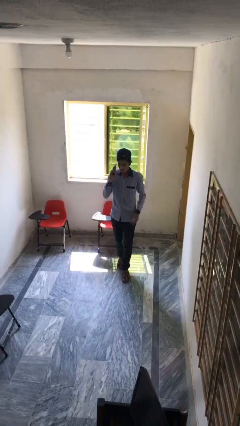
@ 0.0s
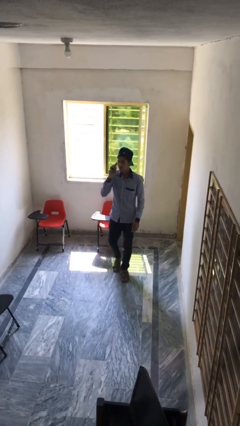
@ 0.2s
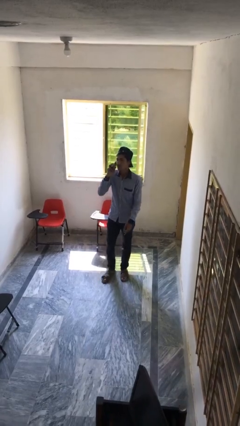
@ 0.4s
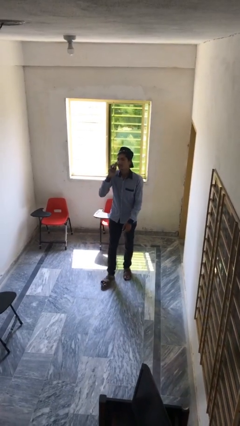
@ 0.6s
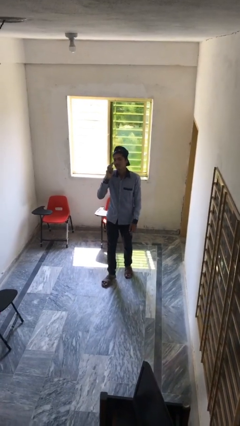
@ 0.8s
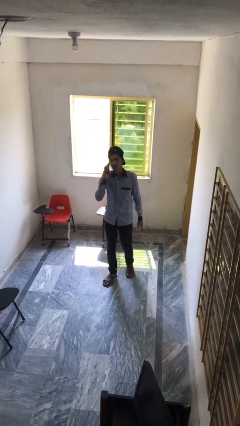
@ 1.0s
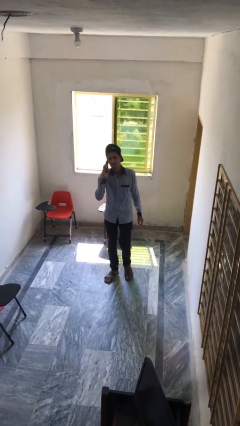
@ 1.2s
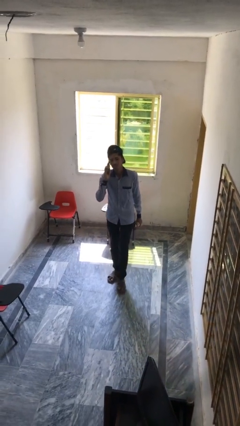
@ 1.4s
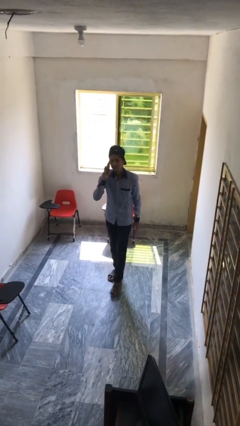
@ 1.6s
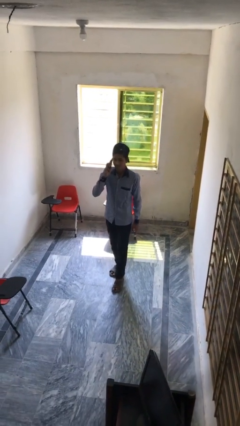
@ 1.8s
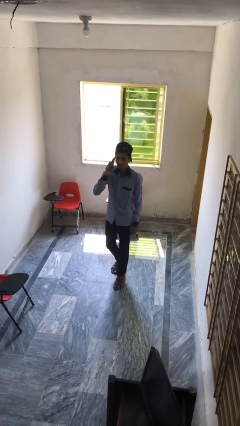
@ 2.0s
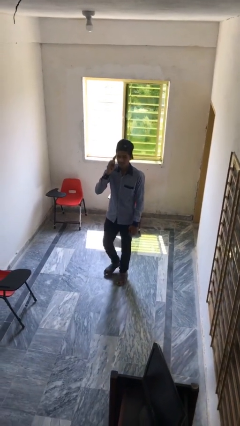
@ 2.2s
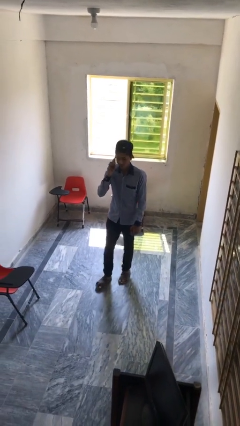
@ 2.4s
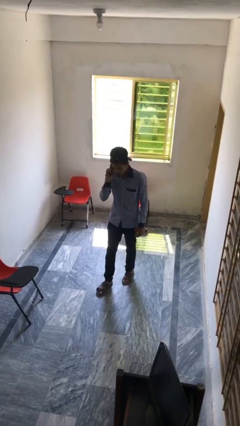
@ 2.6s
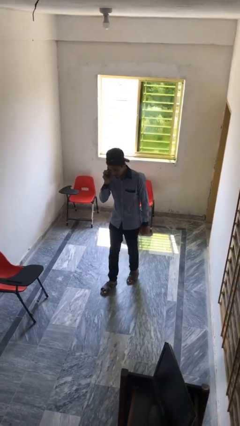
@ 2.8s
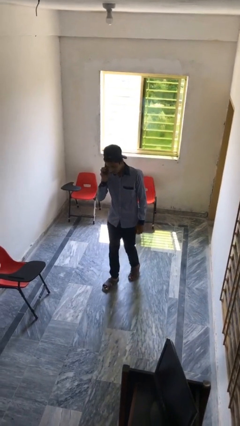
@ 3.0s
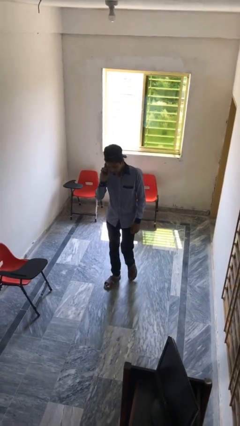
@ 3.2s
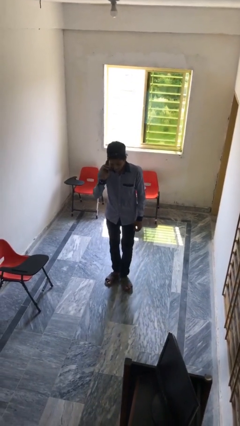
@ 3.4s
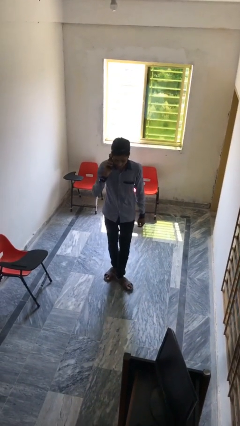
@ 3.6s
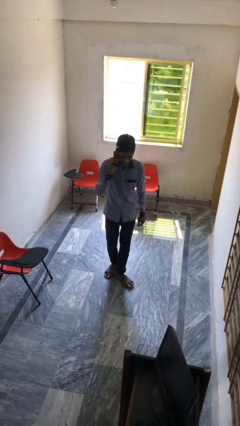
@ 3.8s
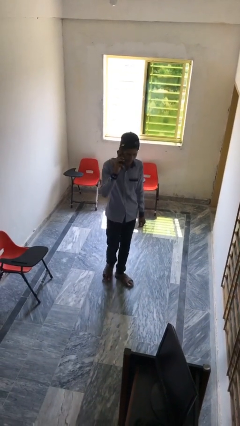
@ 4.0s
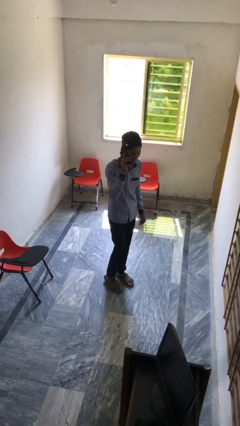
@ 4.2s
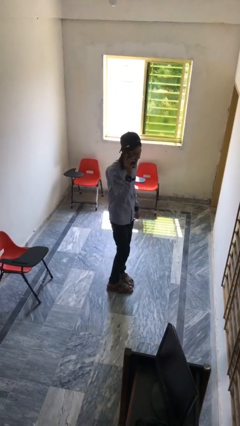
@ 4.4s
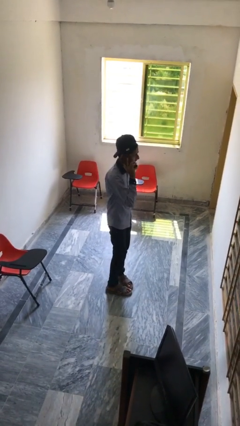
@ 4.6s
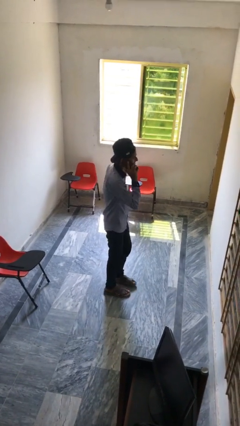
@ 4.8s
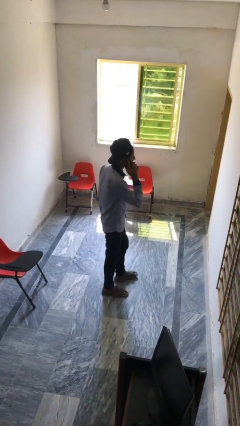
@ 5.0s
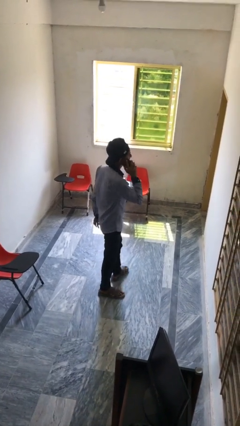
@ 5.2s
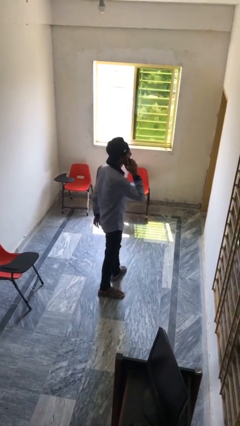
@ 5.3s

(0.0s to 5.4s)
person talks on phone

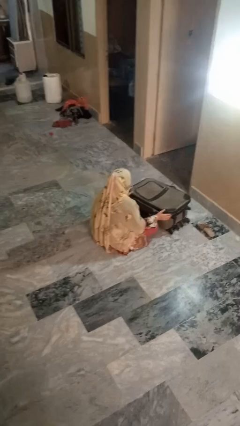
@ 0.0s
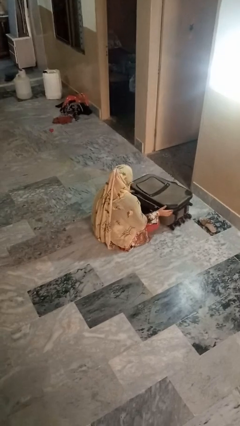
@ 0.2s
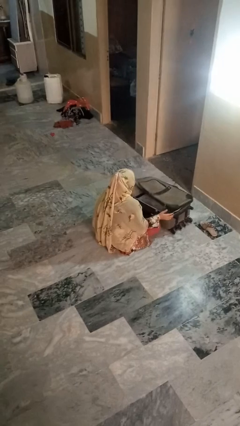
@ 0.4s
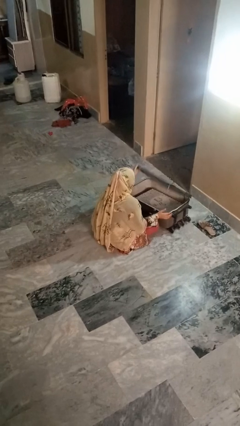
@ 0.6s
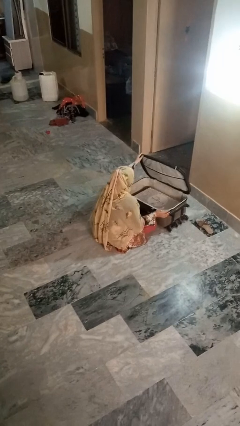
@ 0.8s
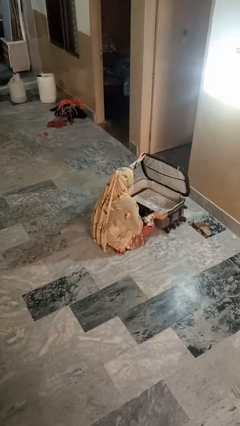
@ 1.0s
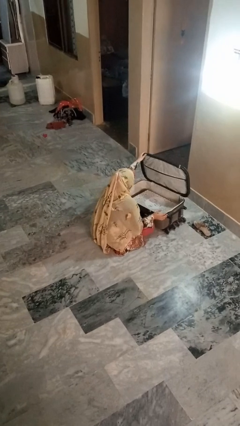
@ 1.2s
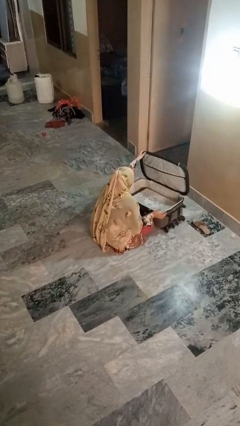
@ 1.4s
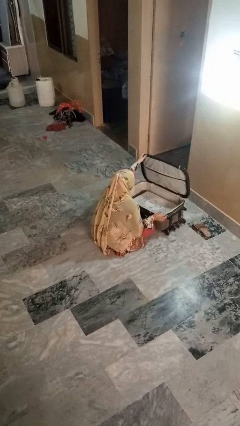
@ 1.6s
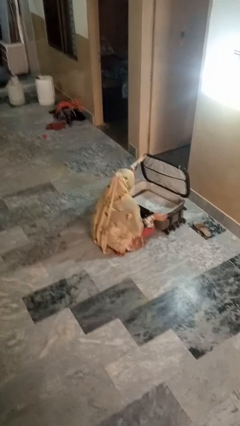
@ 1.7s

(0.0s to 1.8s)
person opens suitcase

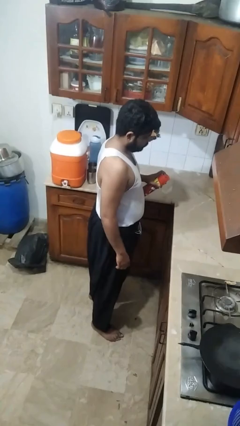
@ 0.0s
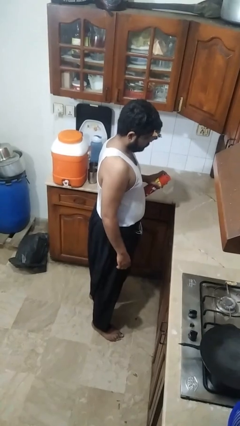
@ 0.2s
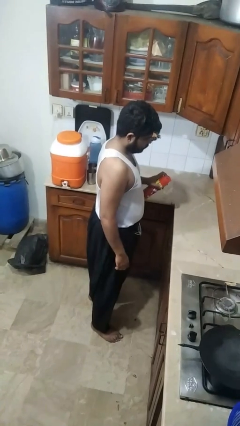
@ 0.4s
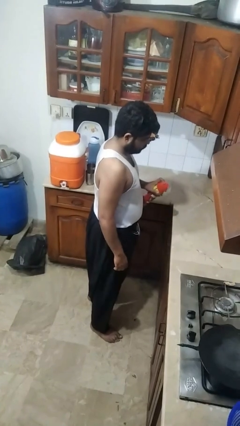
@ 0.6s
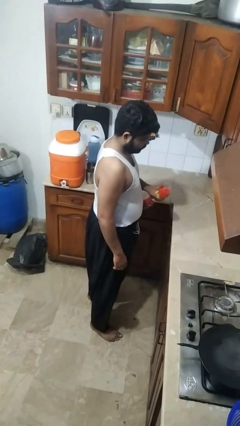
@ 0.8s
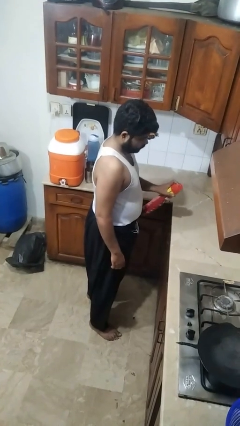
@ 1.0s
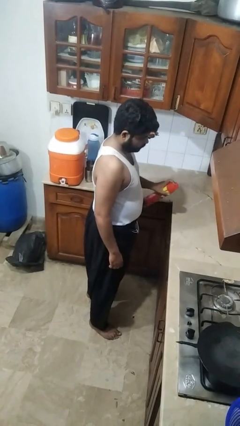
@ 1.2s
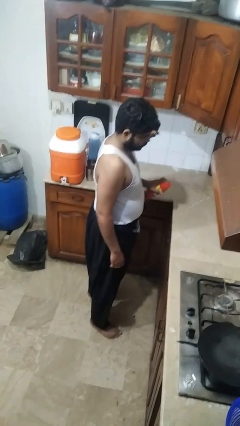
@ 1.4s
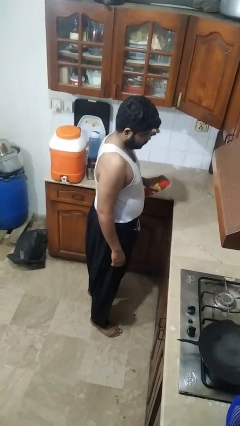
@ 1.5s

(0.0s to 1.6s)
person sprays from bottle

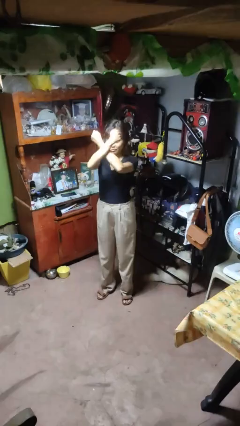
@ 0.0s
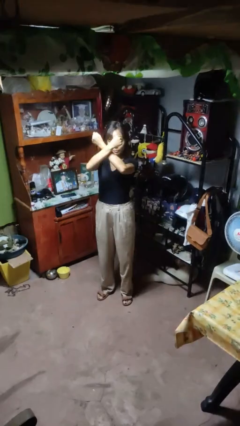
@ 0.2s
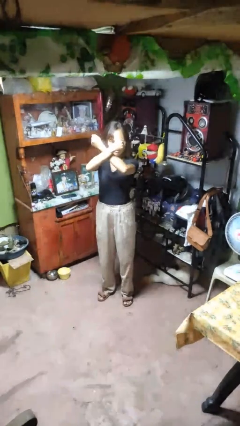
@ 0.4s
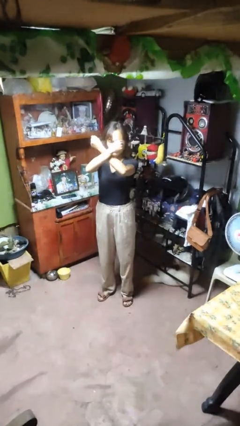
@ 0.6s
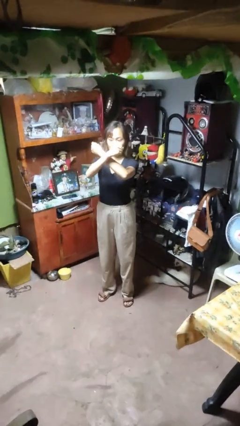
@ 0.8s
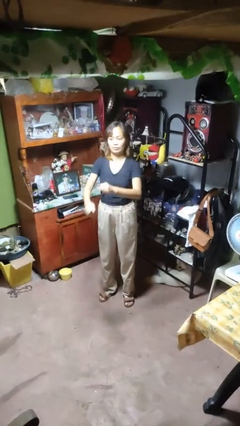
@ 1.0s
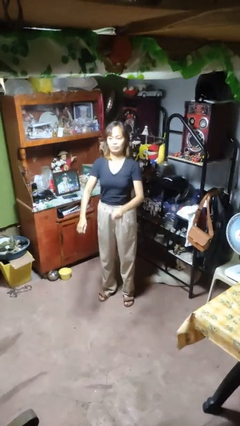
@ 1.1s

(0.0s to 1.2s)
person gestures arms x

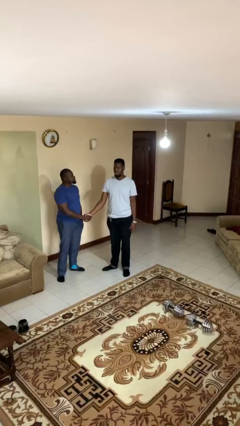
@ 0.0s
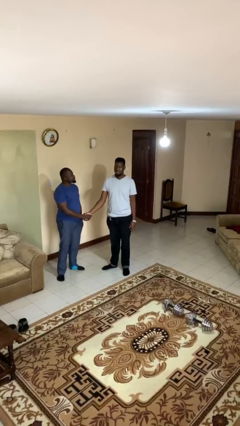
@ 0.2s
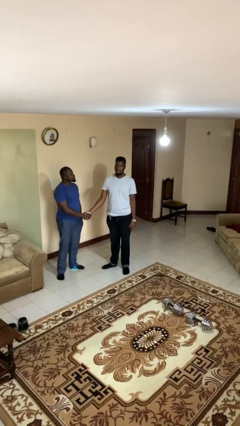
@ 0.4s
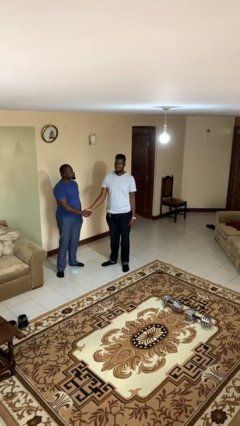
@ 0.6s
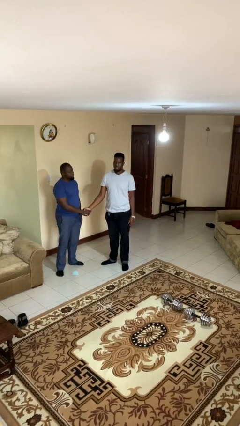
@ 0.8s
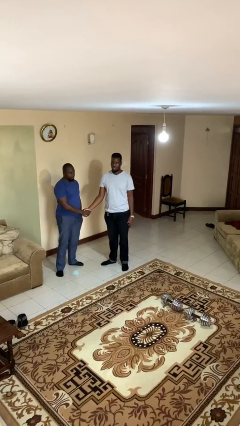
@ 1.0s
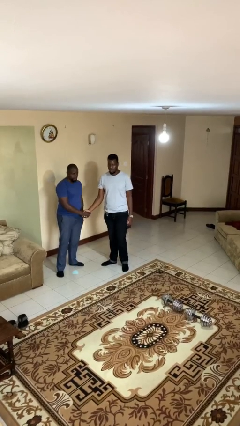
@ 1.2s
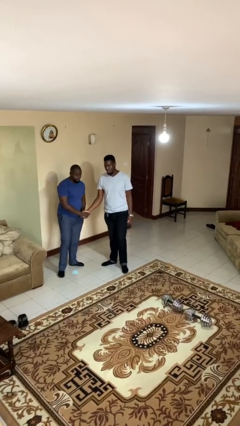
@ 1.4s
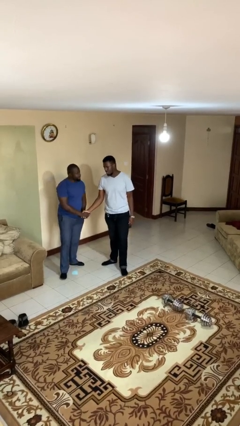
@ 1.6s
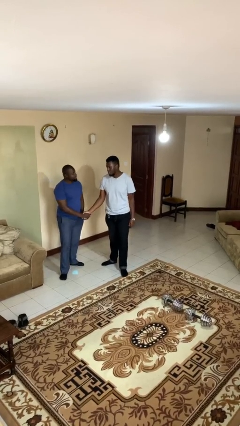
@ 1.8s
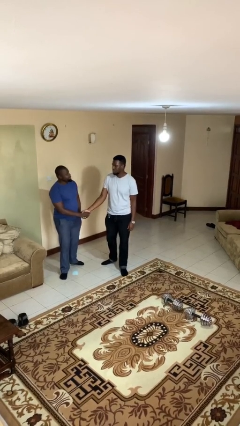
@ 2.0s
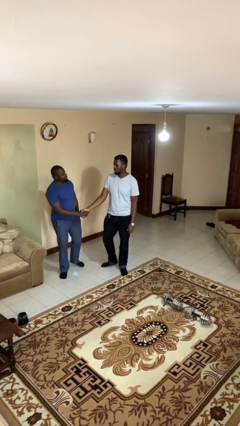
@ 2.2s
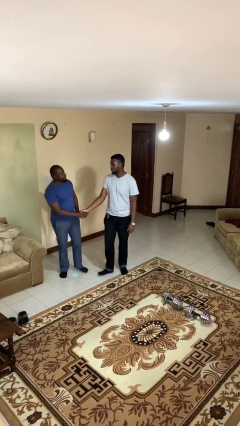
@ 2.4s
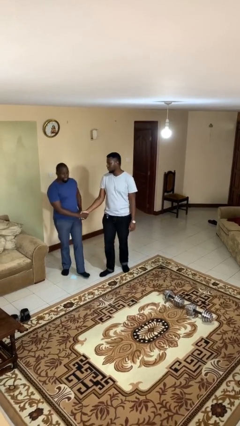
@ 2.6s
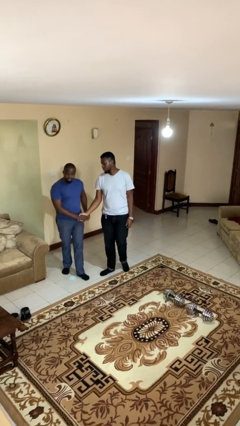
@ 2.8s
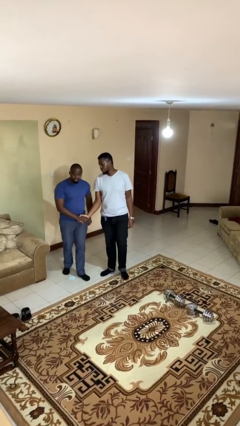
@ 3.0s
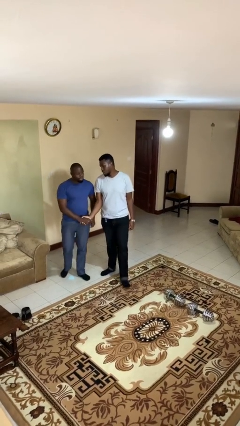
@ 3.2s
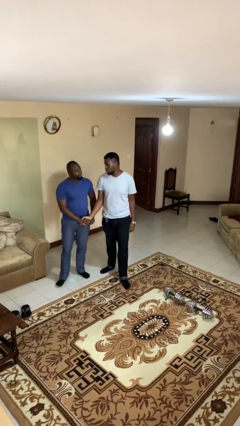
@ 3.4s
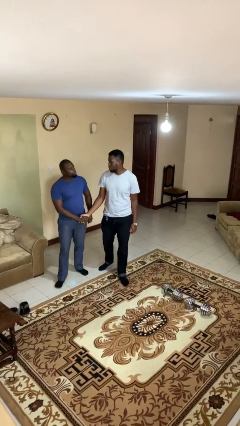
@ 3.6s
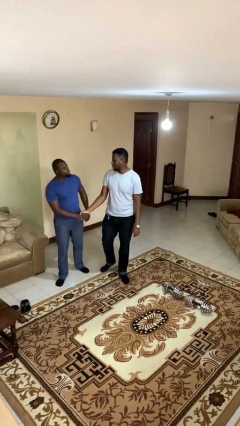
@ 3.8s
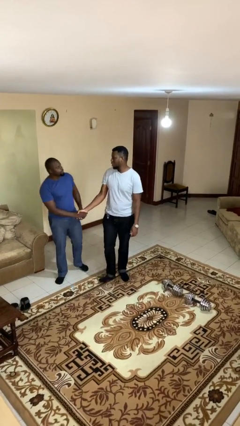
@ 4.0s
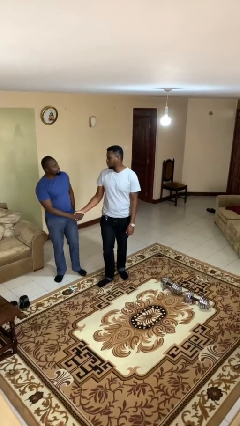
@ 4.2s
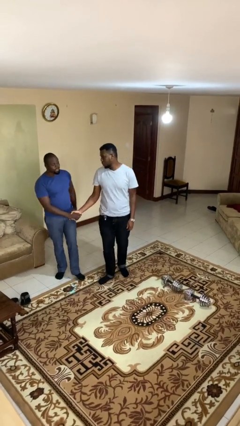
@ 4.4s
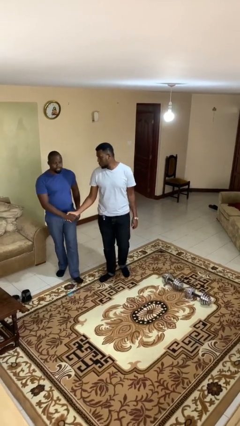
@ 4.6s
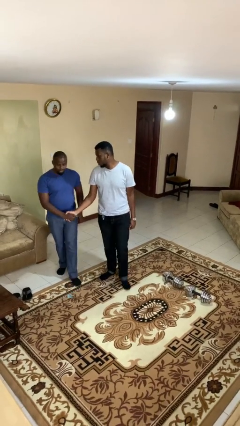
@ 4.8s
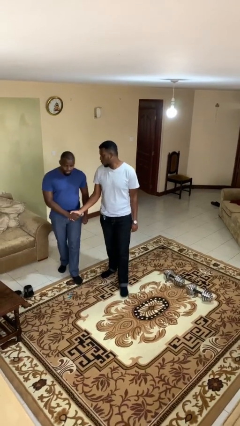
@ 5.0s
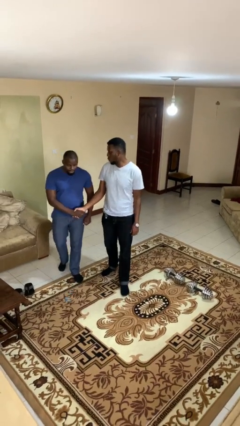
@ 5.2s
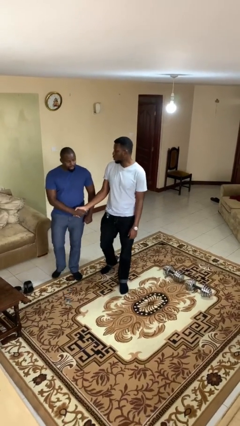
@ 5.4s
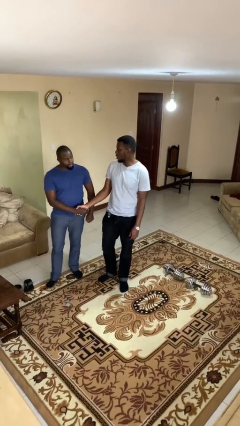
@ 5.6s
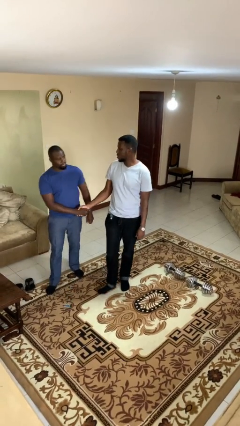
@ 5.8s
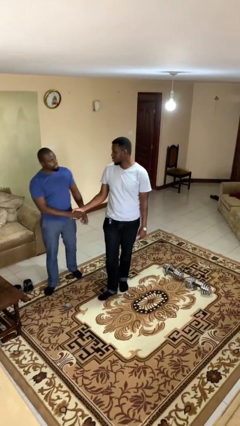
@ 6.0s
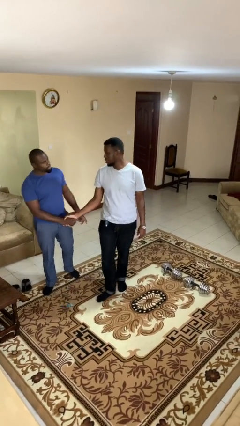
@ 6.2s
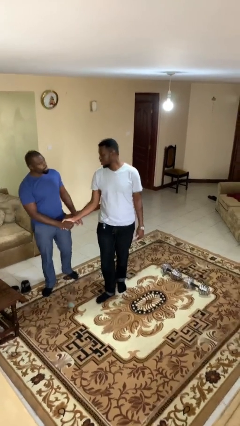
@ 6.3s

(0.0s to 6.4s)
person holds hand

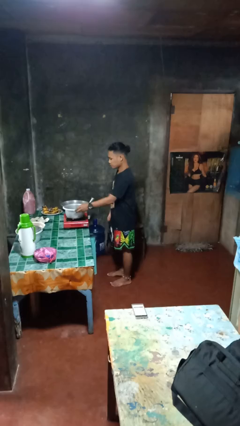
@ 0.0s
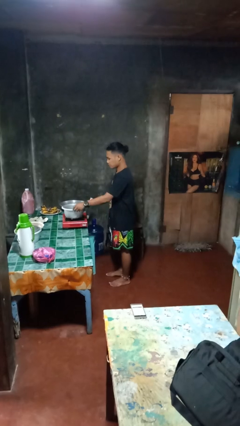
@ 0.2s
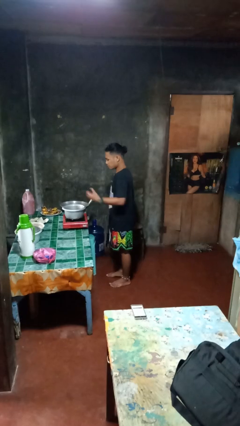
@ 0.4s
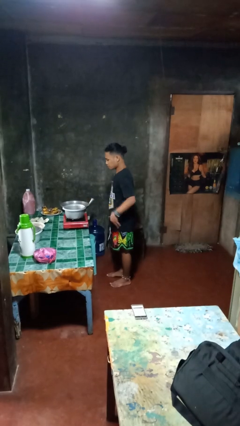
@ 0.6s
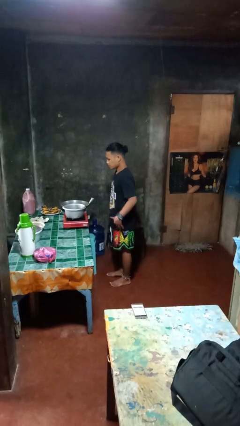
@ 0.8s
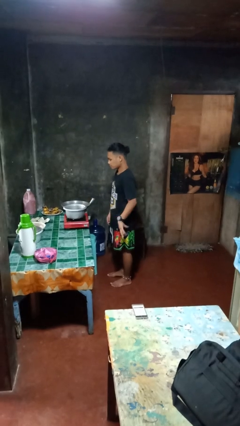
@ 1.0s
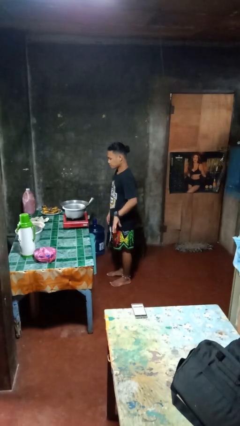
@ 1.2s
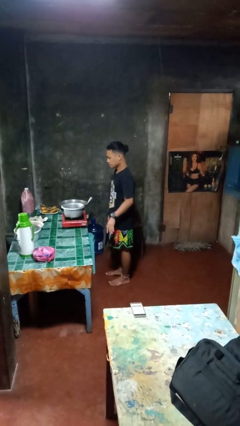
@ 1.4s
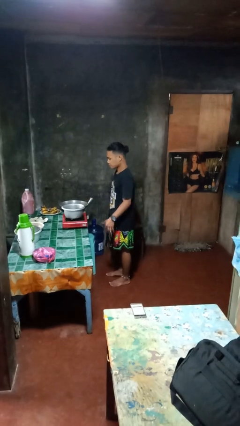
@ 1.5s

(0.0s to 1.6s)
person burns hand
